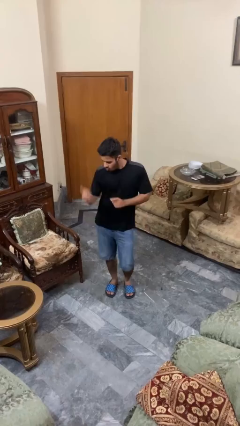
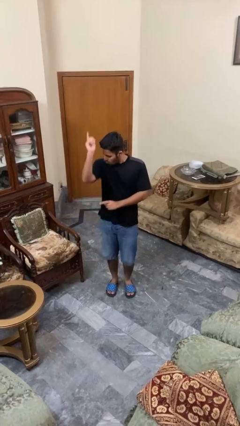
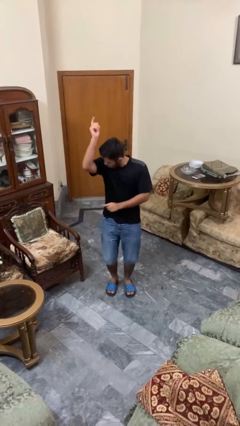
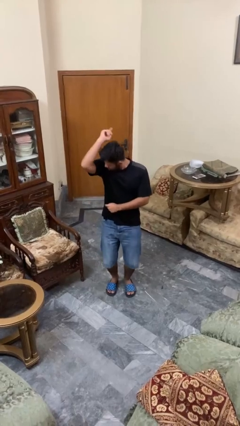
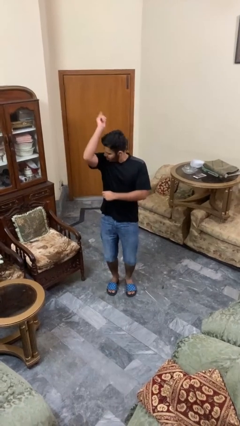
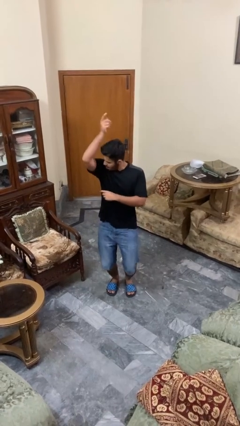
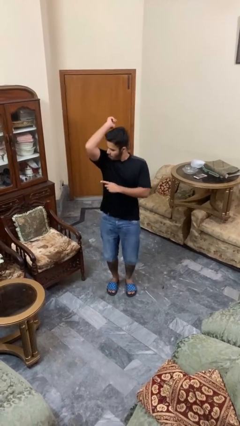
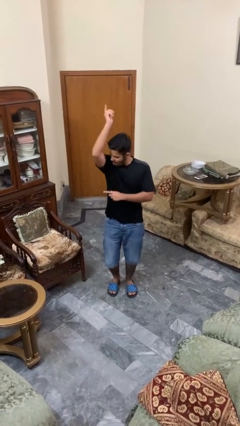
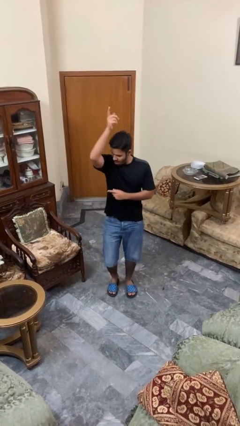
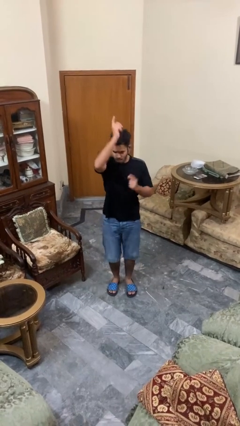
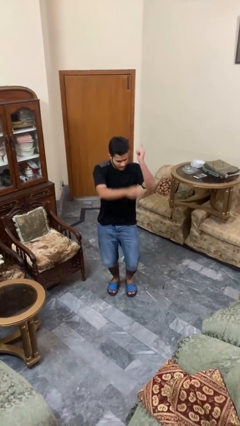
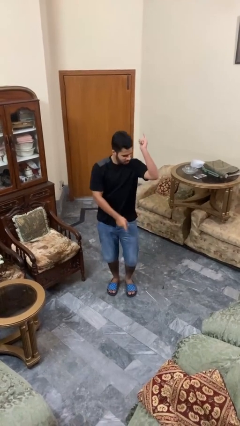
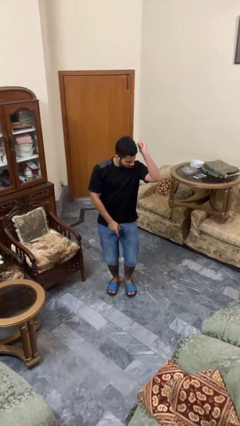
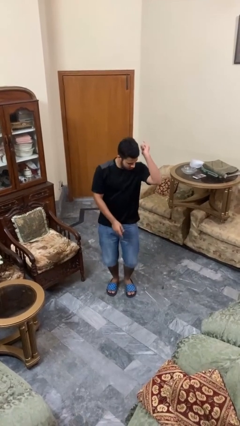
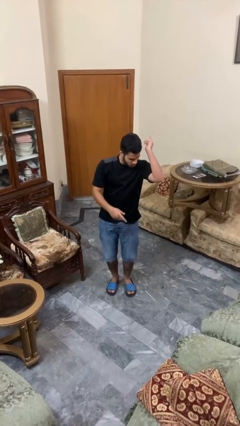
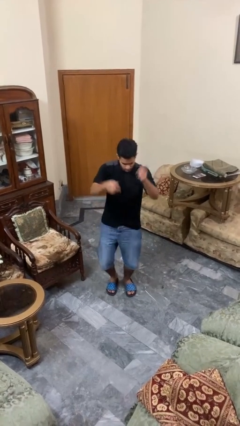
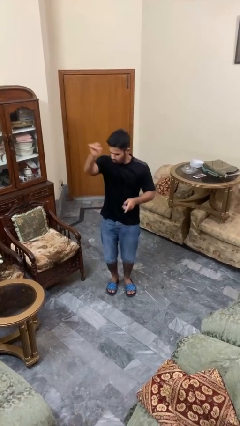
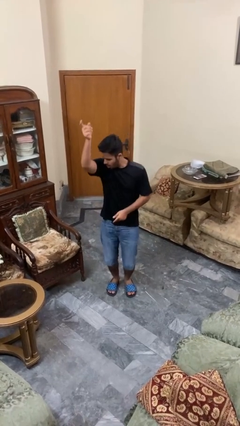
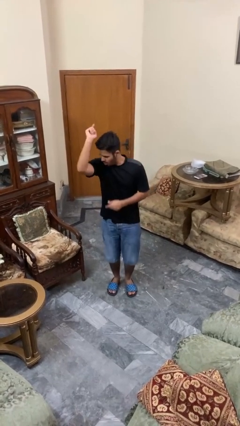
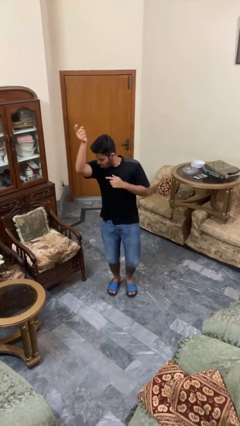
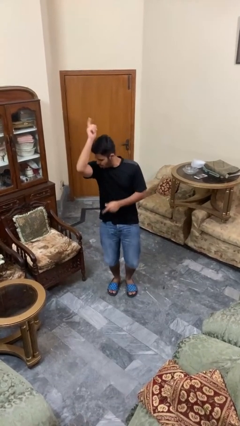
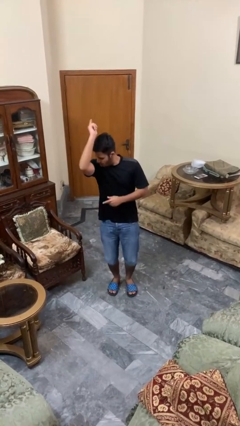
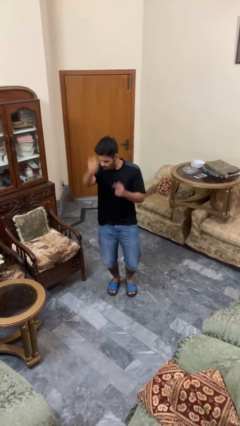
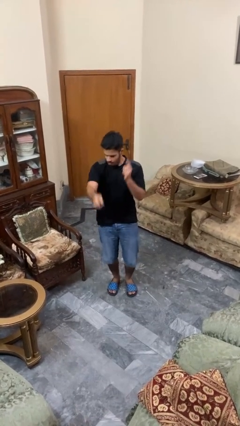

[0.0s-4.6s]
person dances in place

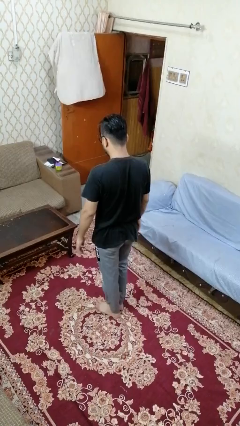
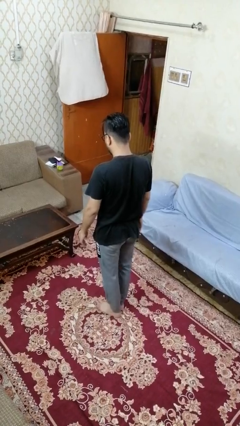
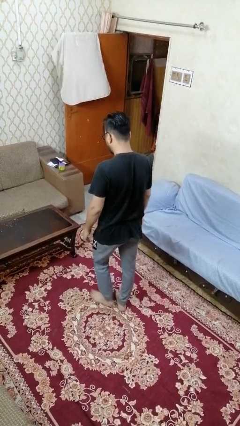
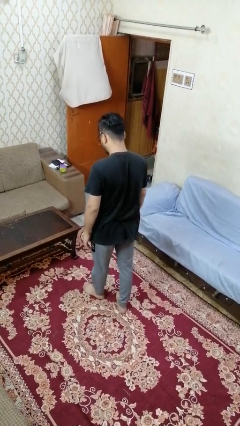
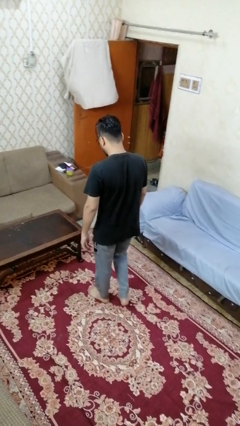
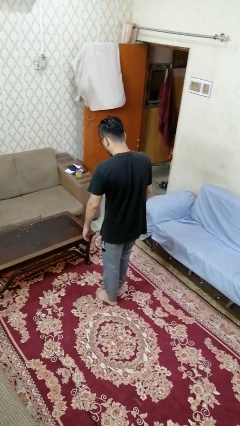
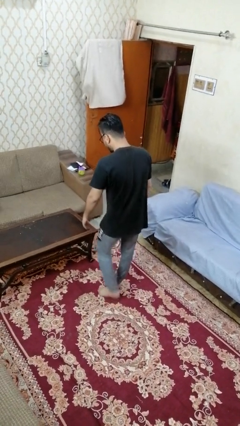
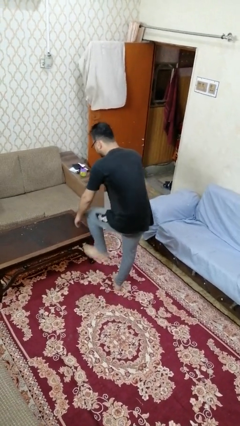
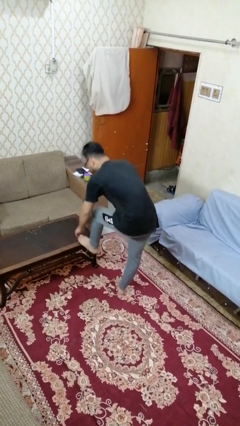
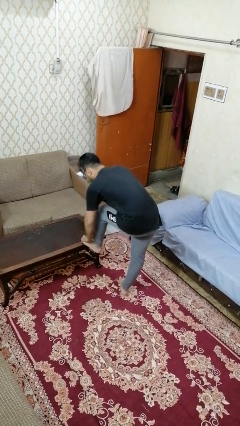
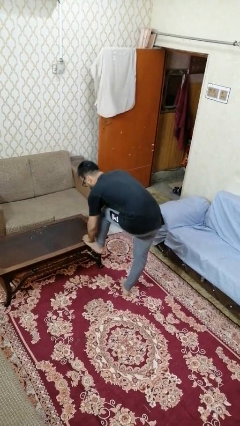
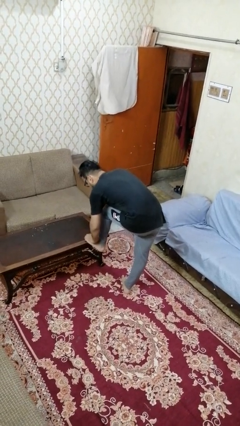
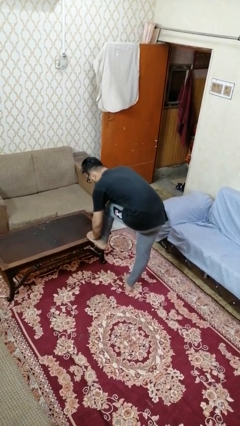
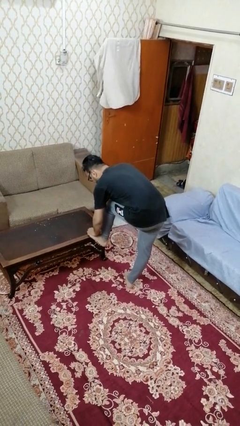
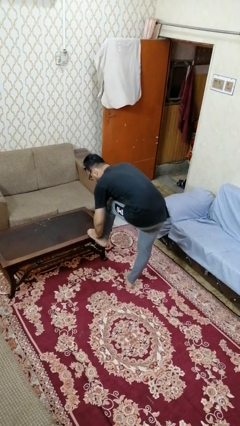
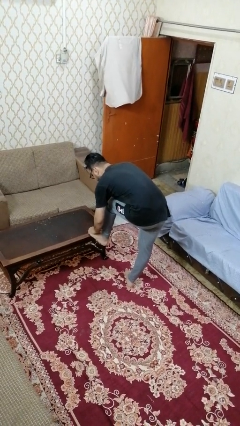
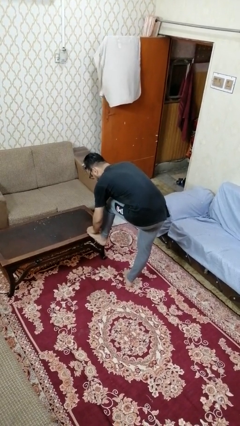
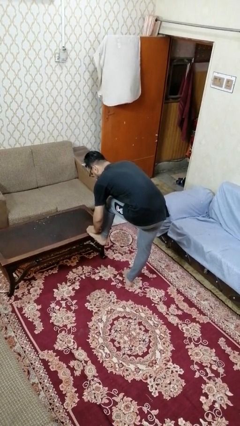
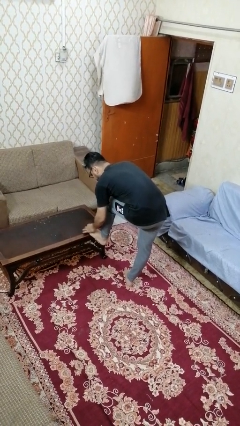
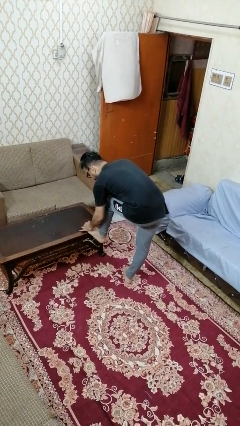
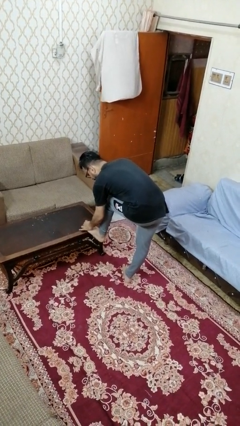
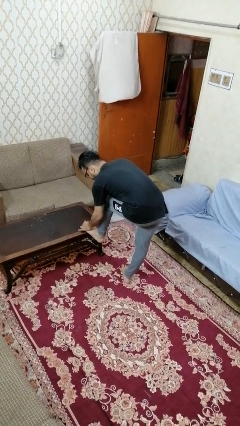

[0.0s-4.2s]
person stubs toe

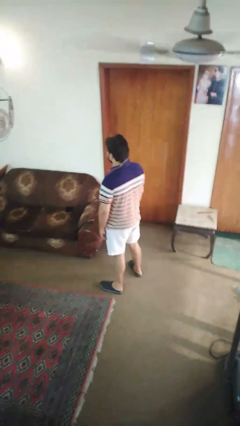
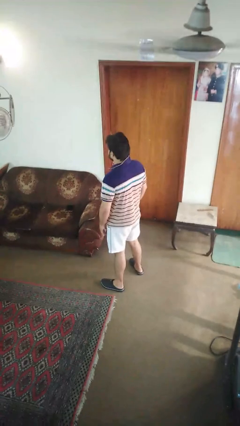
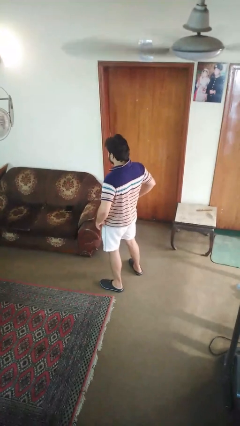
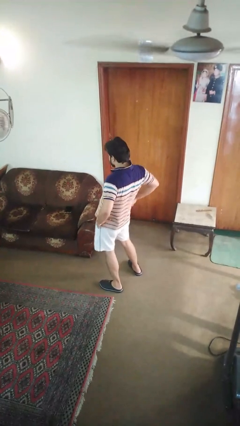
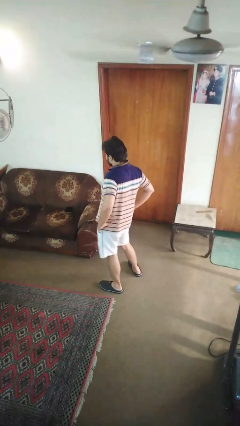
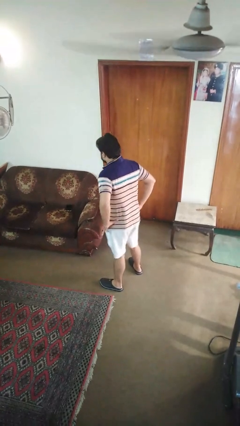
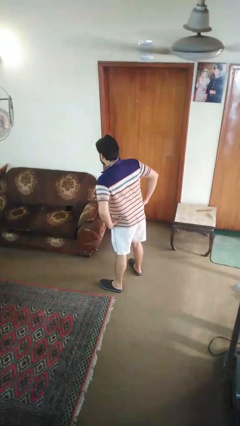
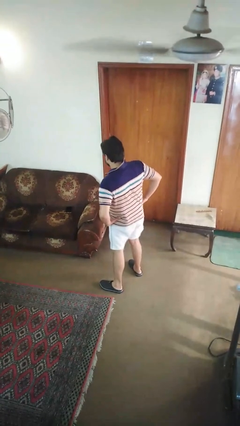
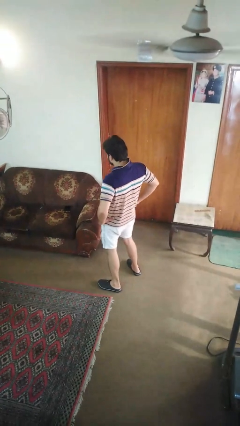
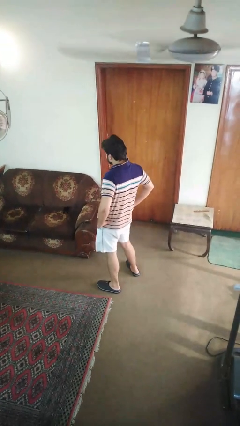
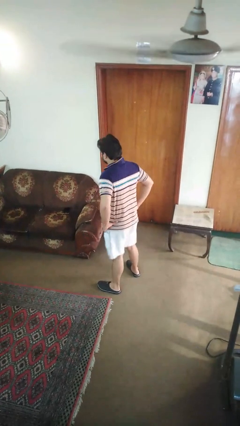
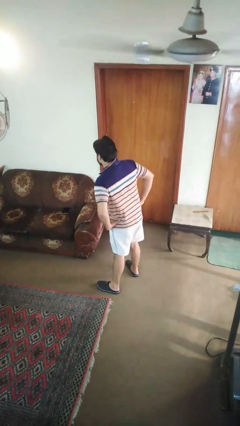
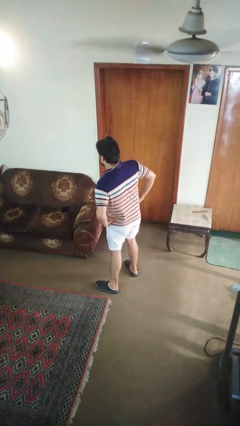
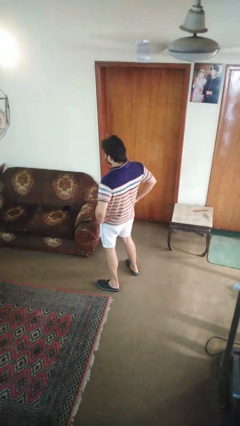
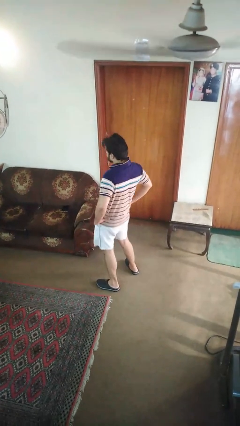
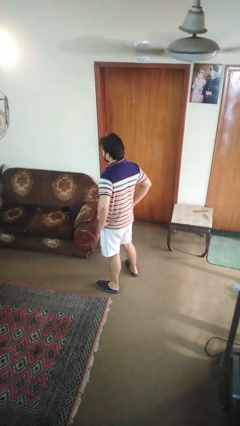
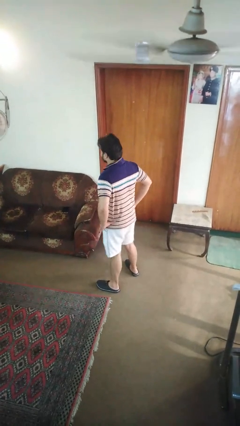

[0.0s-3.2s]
person wiggles hips

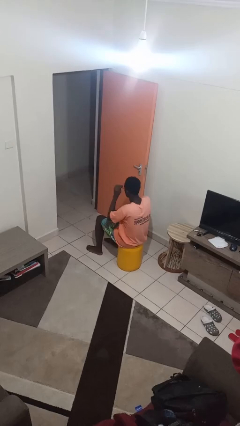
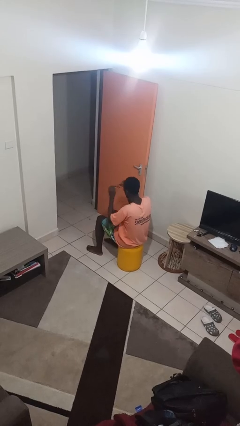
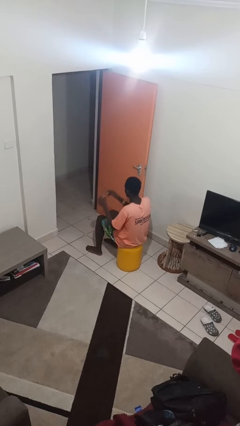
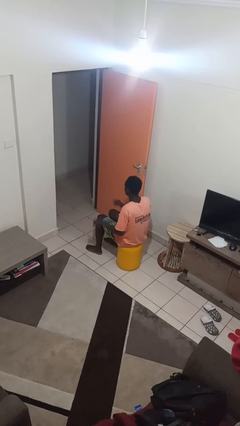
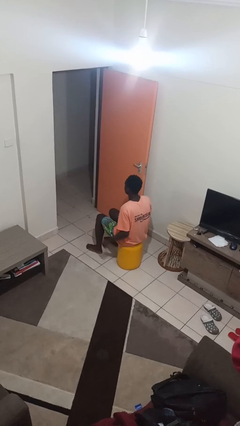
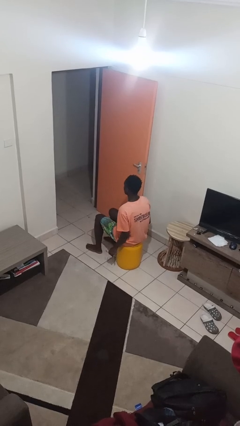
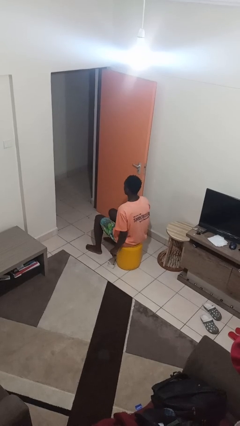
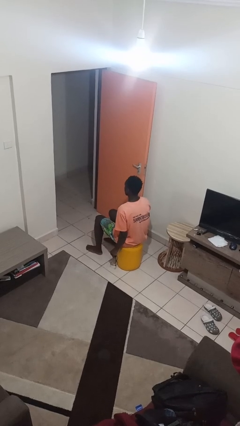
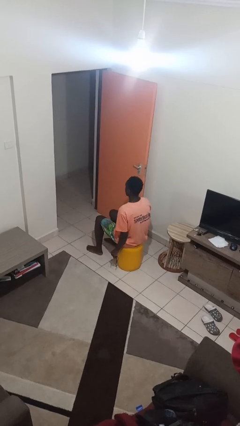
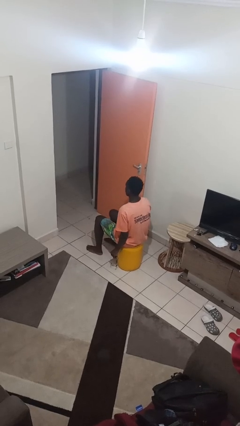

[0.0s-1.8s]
person takes off glasses

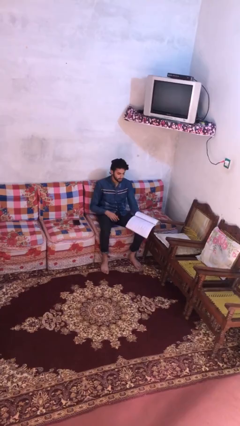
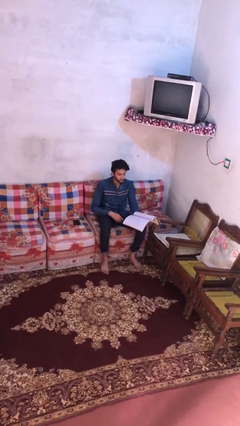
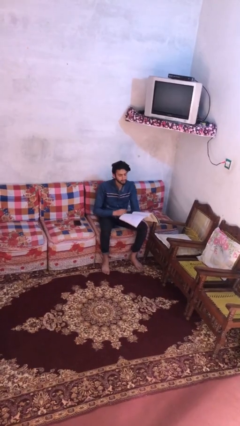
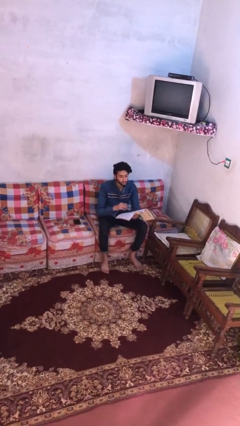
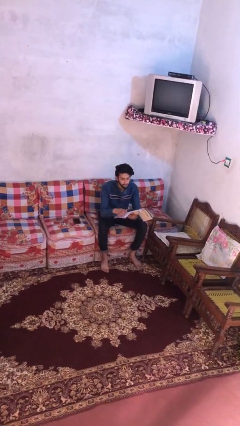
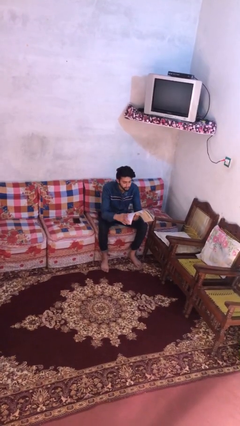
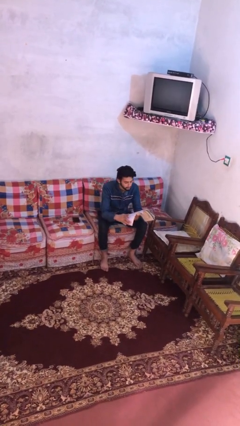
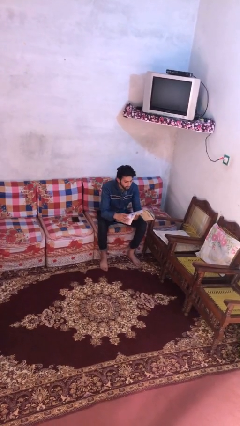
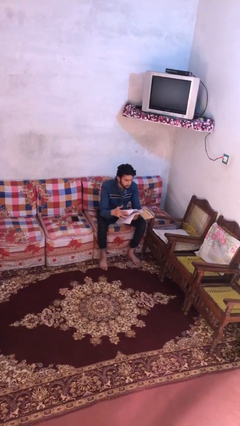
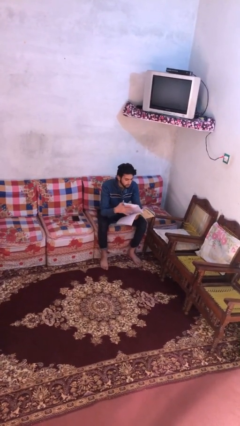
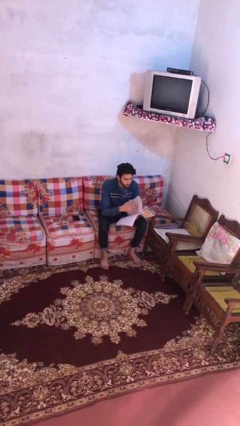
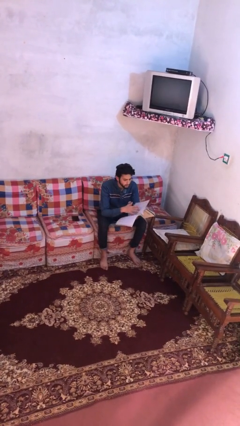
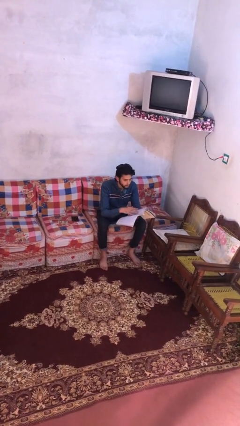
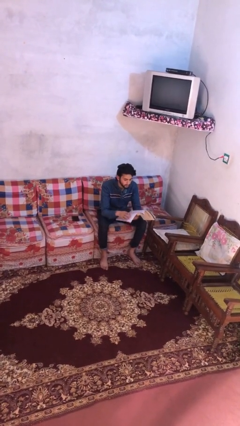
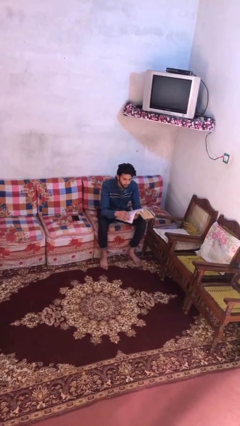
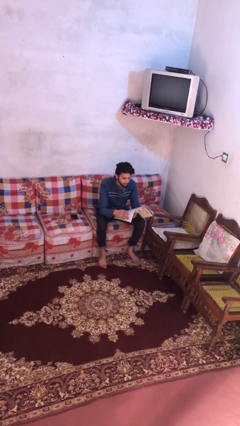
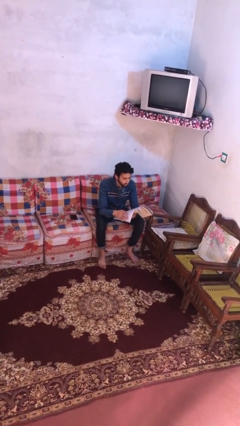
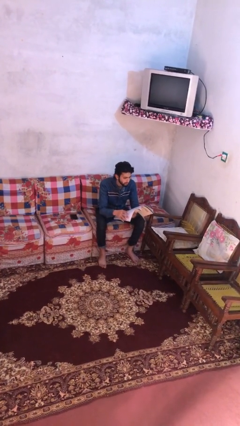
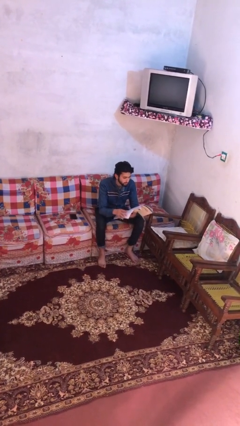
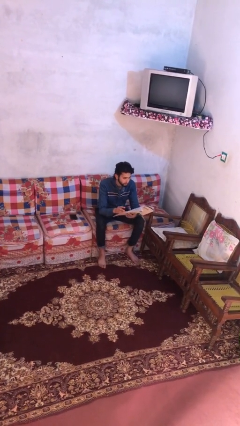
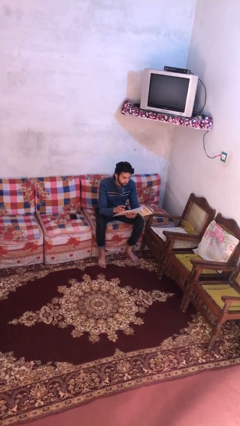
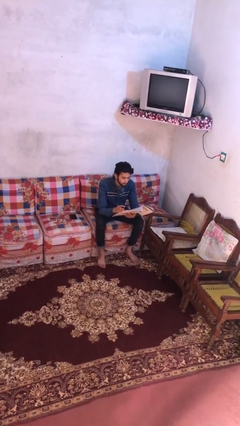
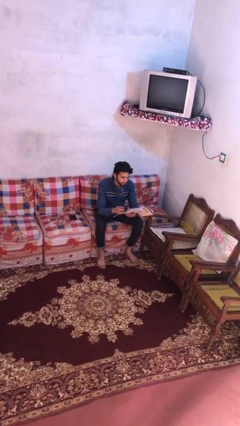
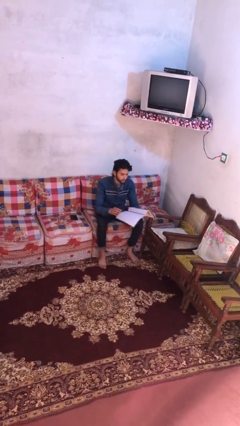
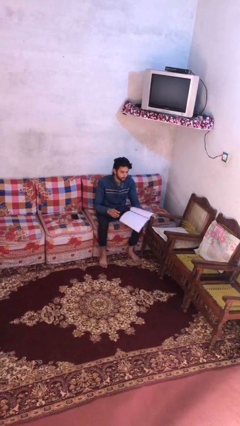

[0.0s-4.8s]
person reads document
